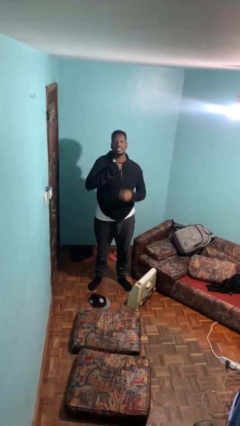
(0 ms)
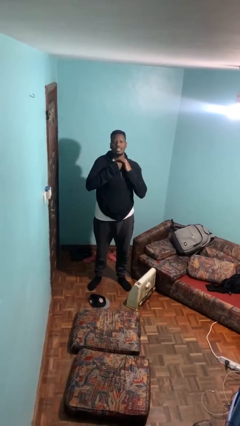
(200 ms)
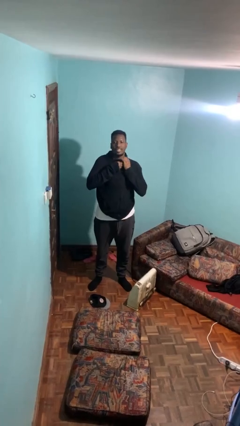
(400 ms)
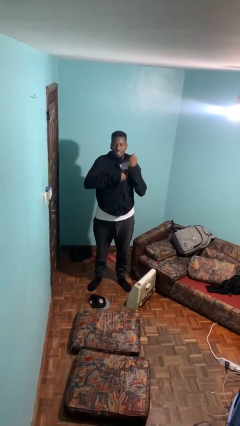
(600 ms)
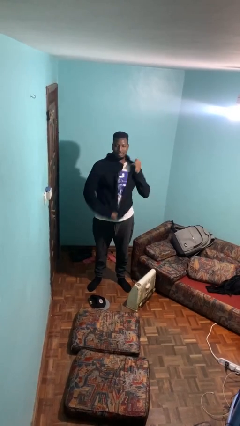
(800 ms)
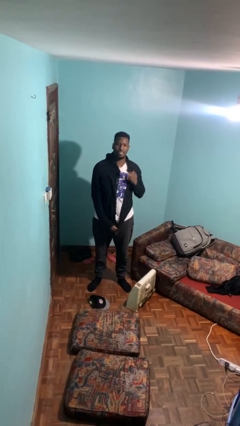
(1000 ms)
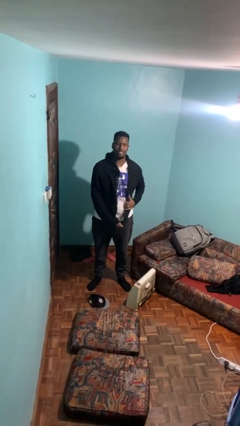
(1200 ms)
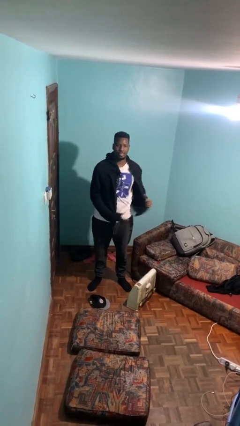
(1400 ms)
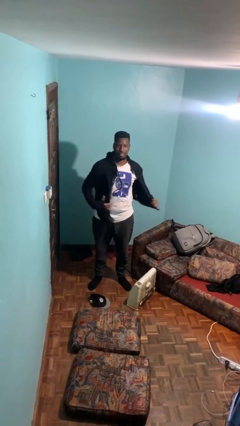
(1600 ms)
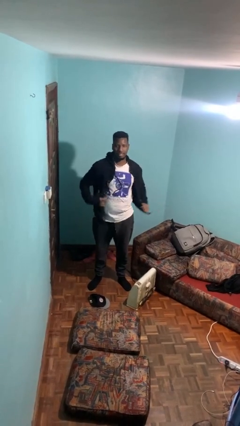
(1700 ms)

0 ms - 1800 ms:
person unzips jacket

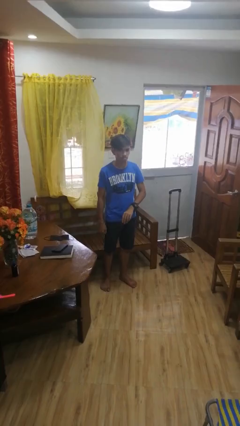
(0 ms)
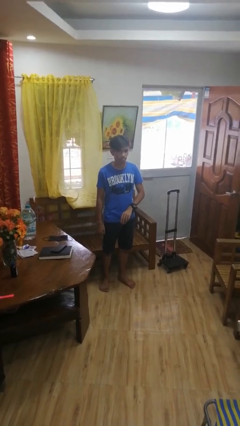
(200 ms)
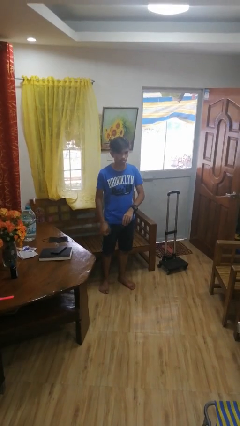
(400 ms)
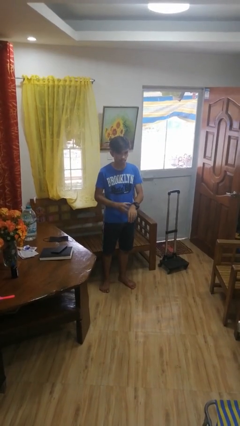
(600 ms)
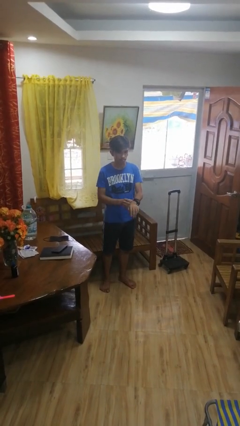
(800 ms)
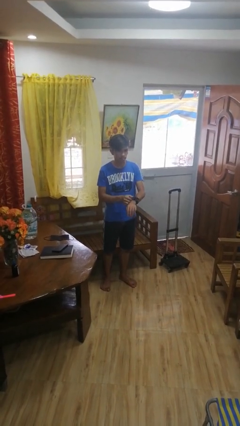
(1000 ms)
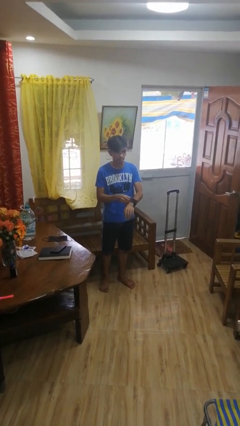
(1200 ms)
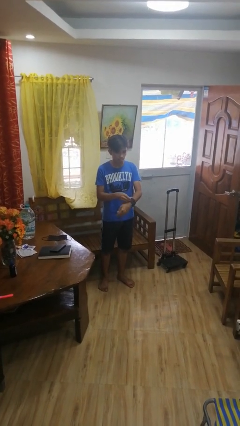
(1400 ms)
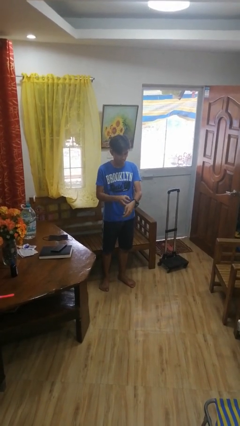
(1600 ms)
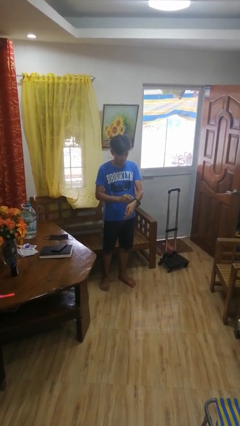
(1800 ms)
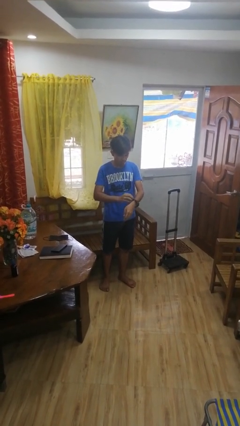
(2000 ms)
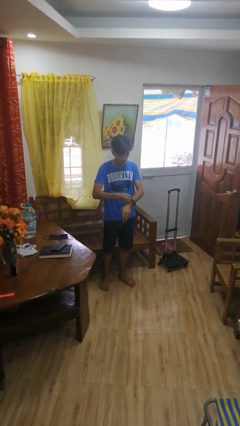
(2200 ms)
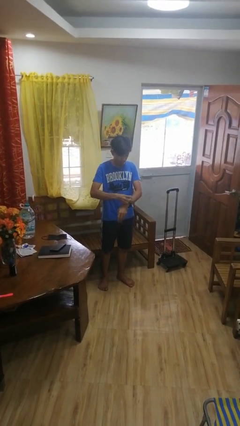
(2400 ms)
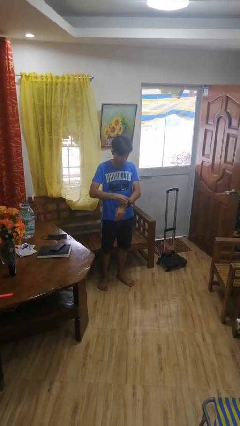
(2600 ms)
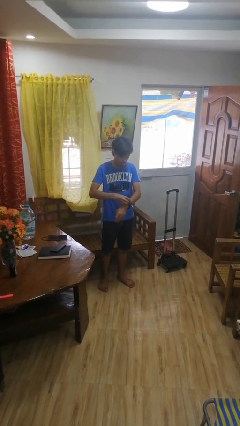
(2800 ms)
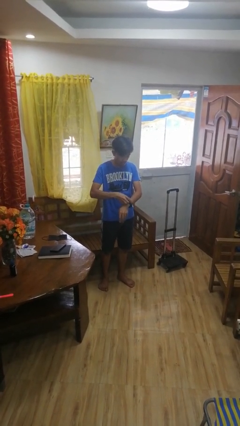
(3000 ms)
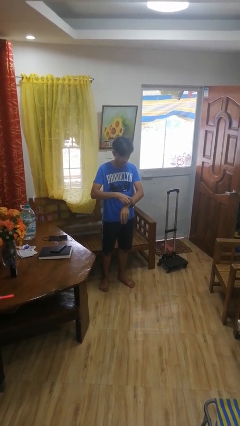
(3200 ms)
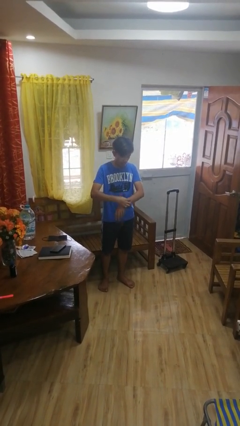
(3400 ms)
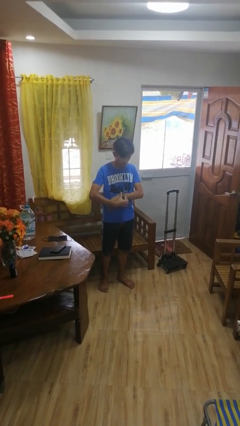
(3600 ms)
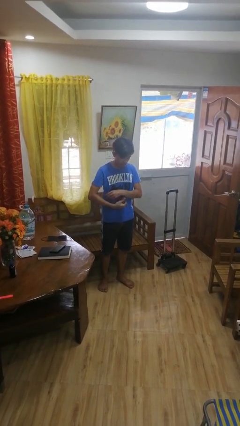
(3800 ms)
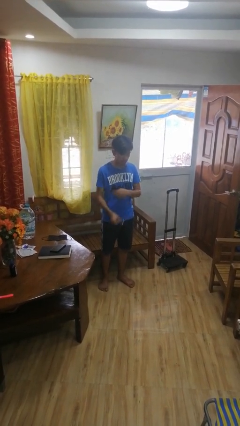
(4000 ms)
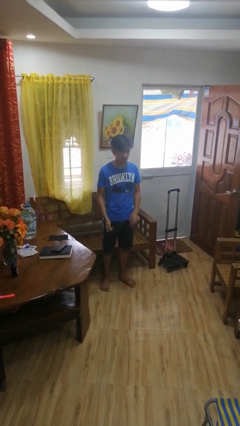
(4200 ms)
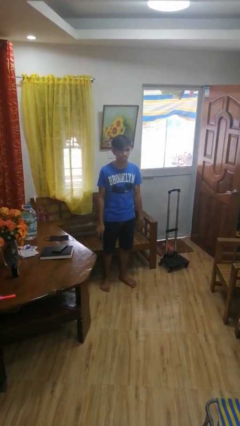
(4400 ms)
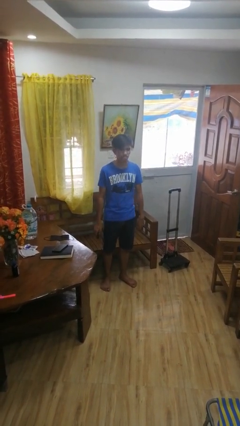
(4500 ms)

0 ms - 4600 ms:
person takes off wristwatch

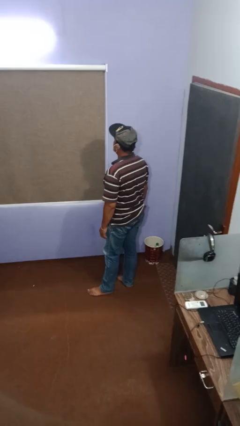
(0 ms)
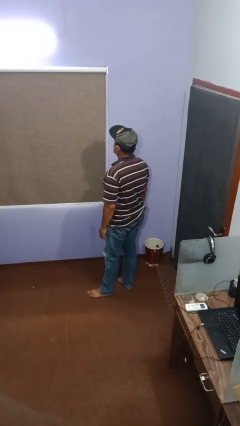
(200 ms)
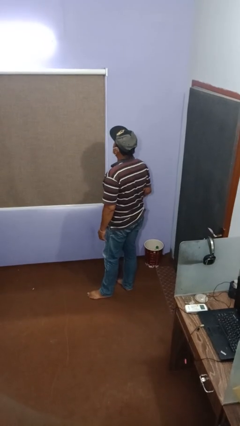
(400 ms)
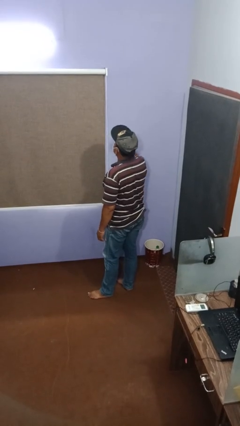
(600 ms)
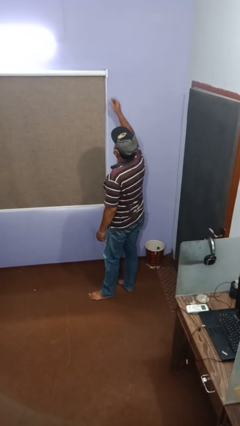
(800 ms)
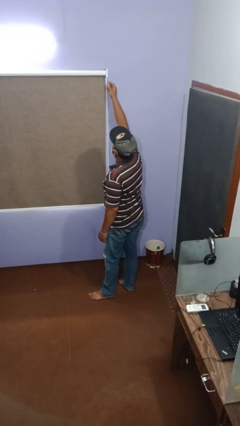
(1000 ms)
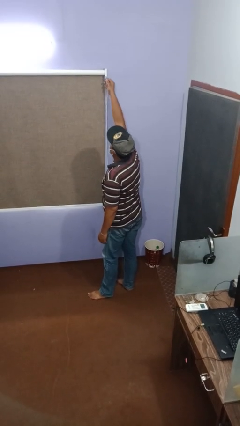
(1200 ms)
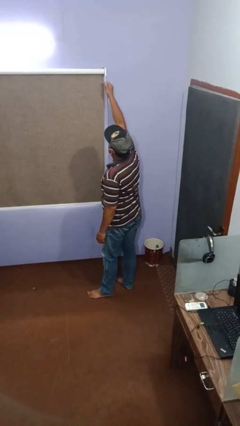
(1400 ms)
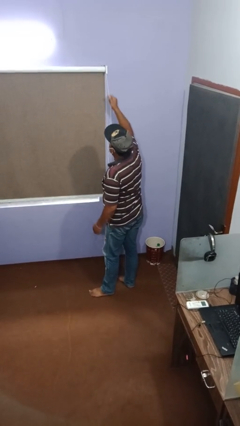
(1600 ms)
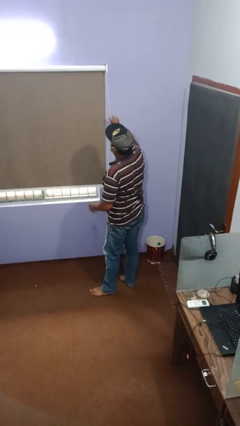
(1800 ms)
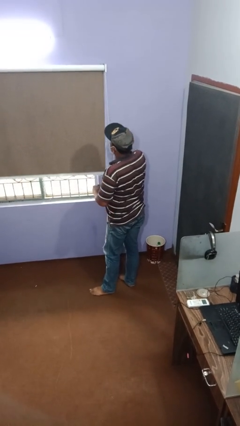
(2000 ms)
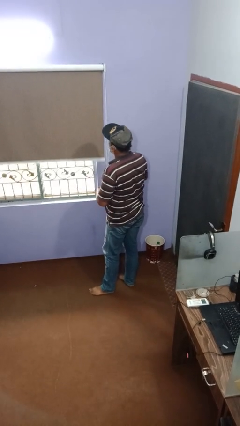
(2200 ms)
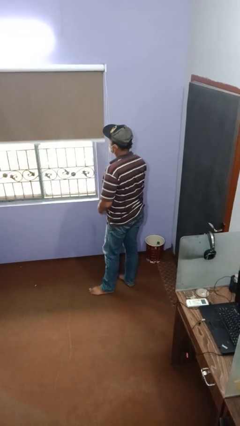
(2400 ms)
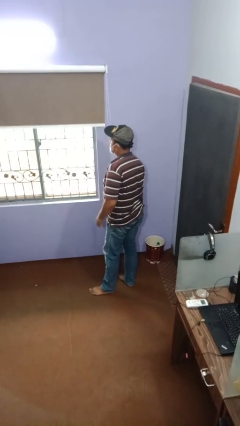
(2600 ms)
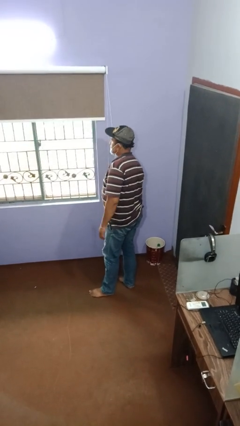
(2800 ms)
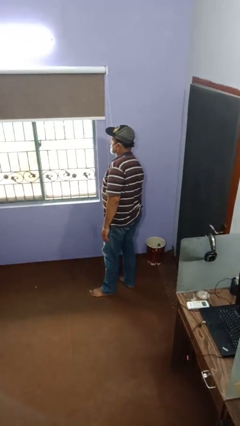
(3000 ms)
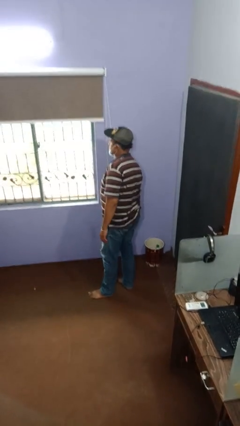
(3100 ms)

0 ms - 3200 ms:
person opens curtains

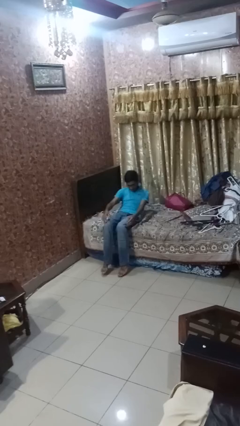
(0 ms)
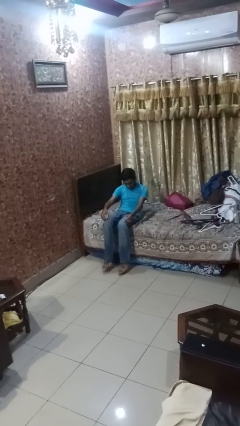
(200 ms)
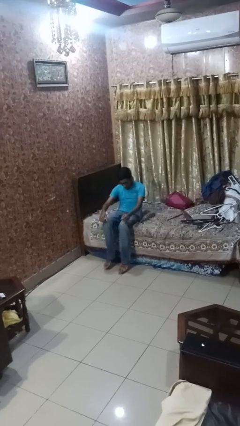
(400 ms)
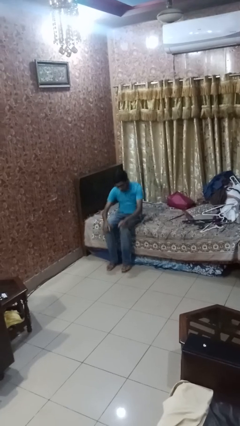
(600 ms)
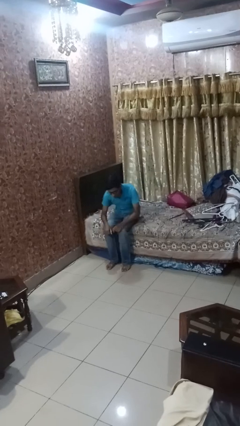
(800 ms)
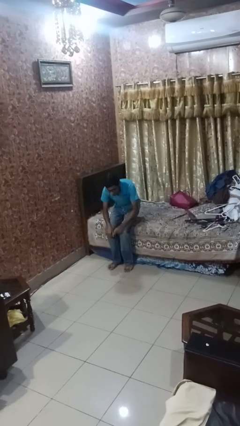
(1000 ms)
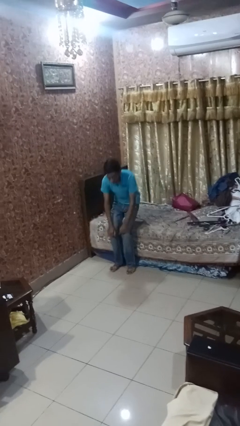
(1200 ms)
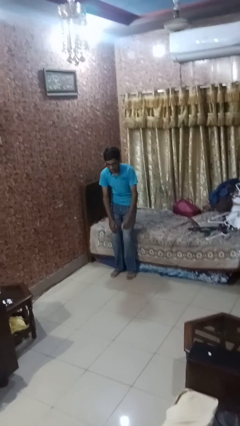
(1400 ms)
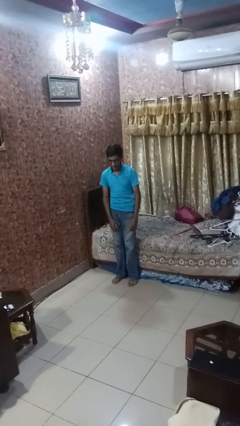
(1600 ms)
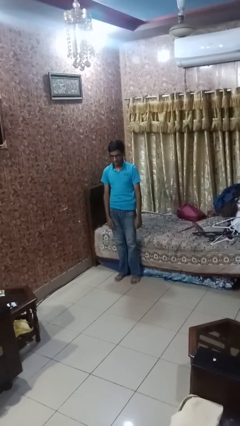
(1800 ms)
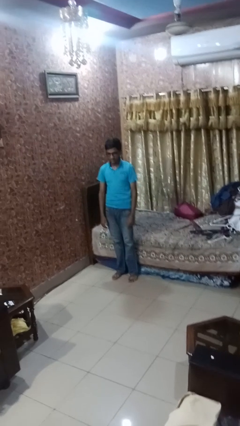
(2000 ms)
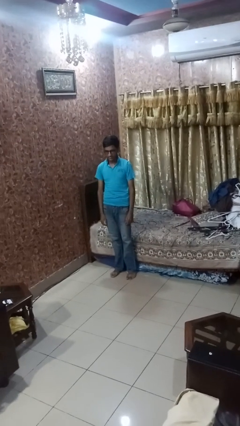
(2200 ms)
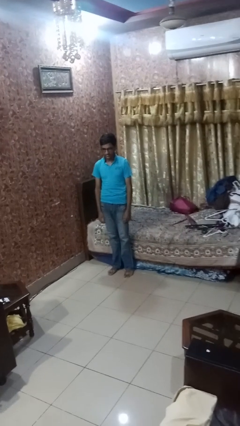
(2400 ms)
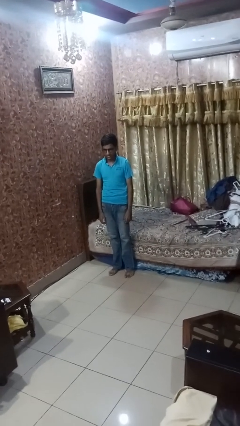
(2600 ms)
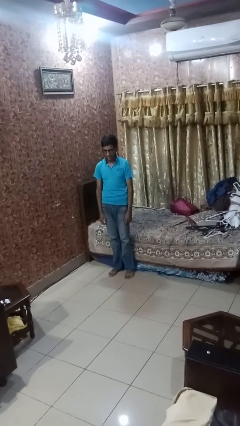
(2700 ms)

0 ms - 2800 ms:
person stands up

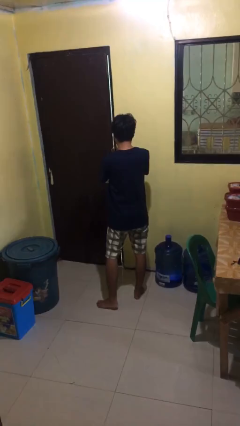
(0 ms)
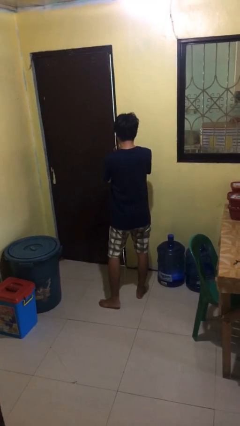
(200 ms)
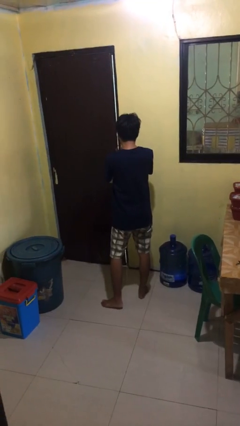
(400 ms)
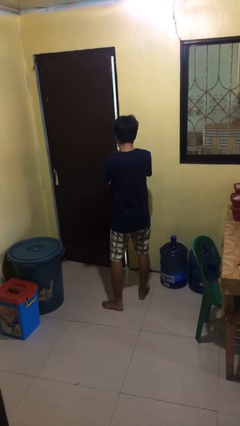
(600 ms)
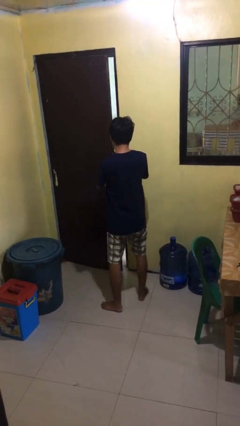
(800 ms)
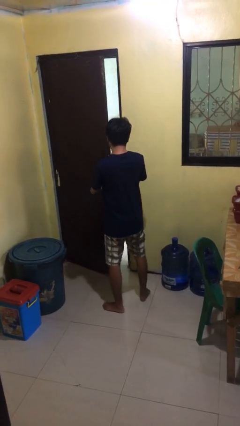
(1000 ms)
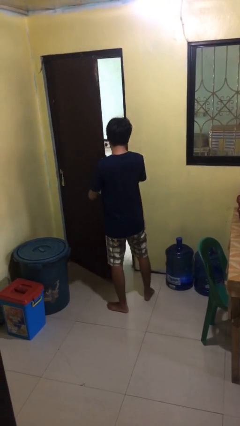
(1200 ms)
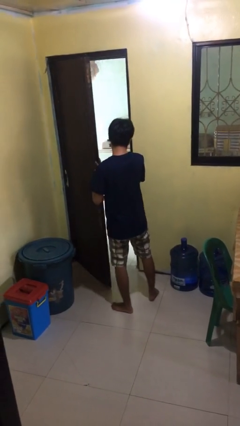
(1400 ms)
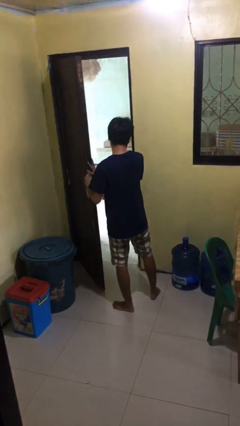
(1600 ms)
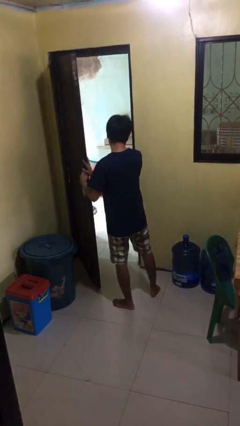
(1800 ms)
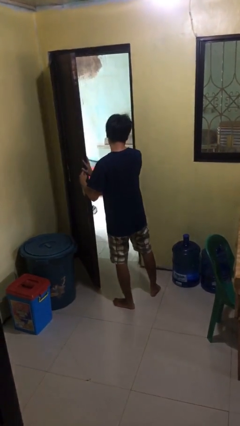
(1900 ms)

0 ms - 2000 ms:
person opens facility door

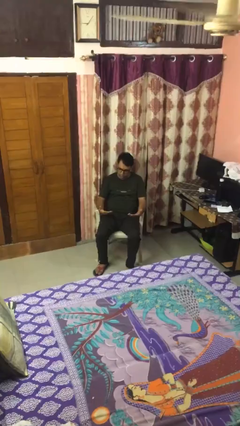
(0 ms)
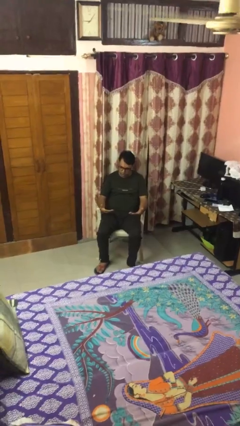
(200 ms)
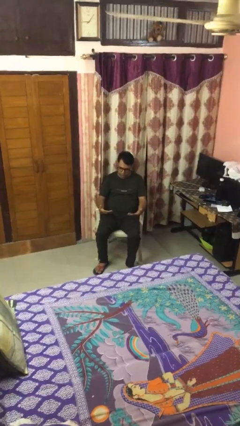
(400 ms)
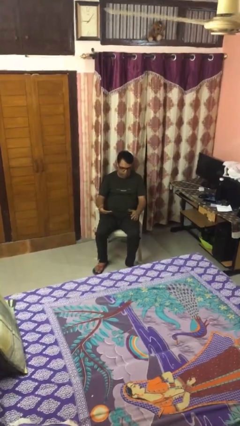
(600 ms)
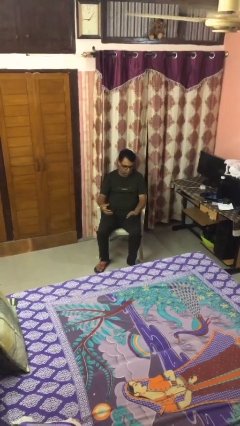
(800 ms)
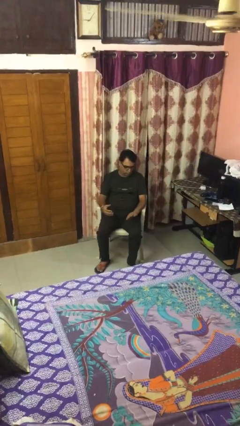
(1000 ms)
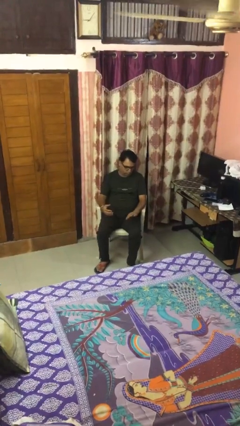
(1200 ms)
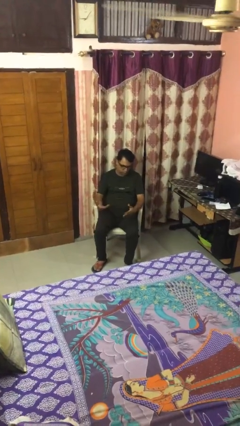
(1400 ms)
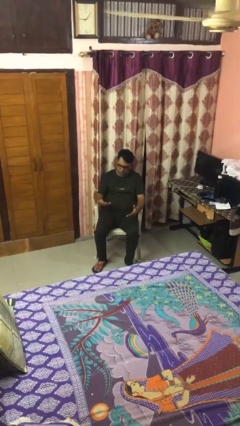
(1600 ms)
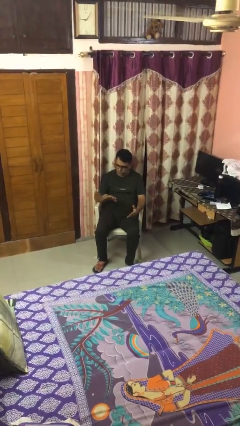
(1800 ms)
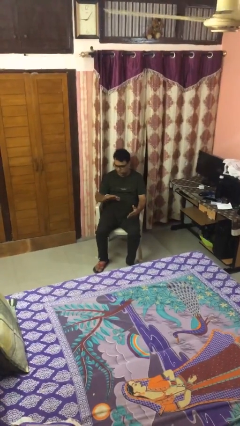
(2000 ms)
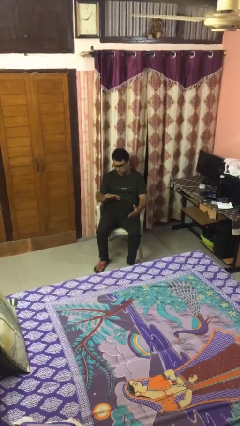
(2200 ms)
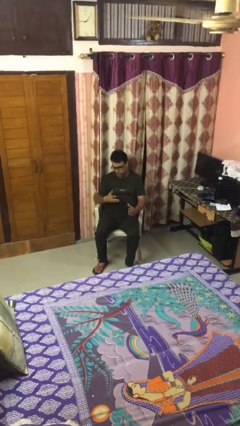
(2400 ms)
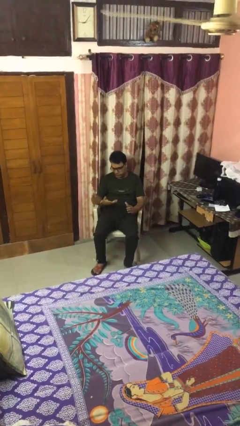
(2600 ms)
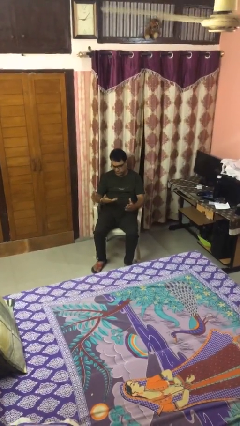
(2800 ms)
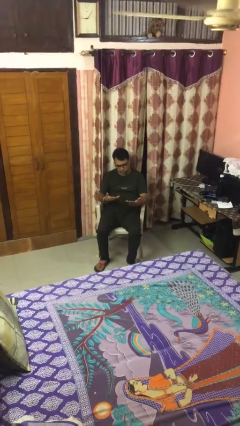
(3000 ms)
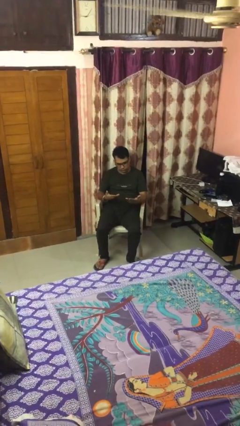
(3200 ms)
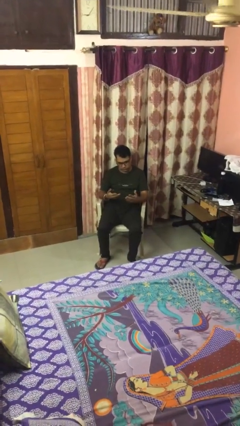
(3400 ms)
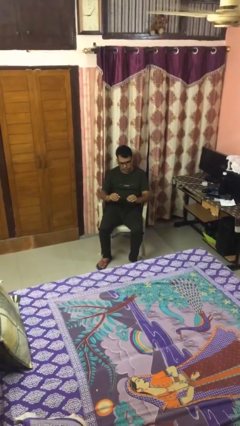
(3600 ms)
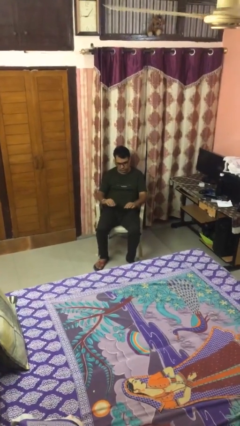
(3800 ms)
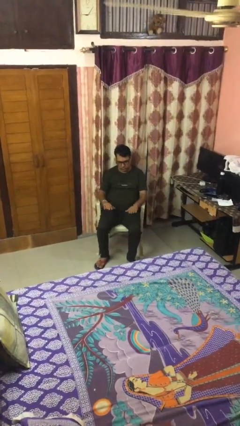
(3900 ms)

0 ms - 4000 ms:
person looks at hands in lap
